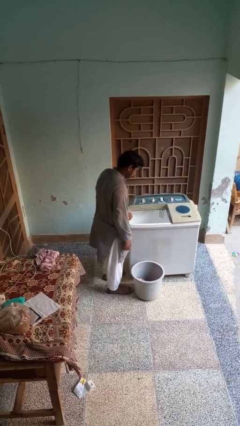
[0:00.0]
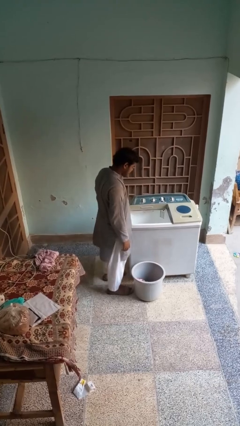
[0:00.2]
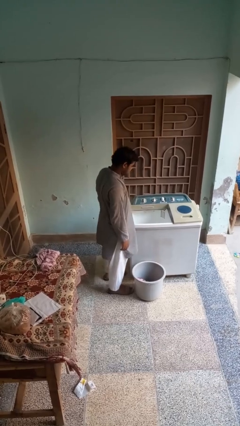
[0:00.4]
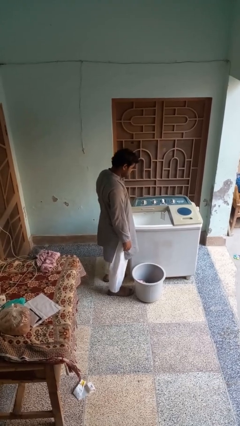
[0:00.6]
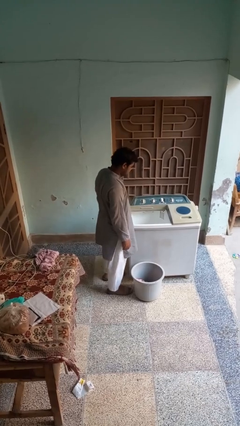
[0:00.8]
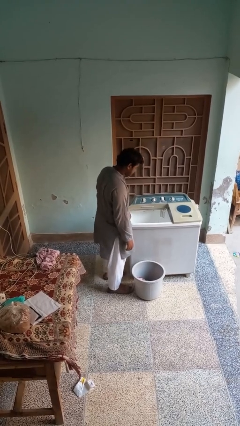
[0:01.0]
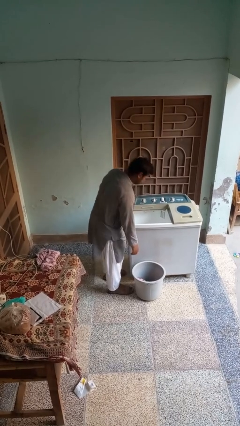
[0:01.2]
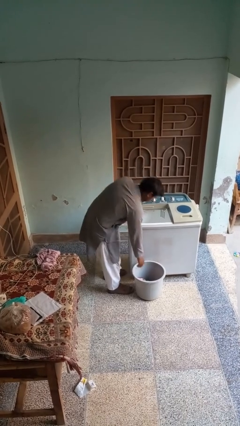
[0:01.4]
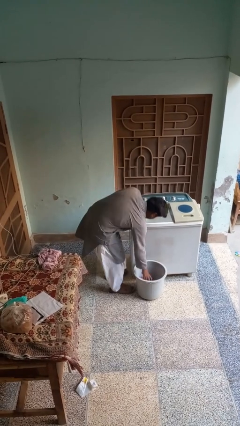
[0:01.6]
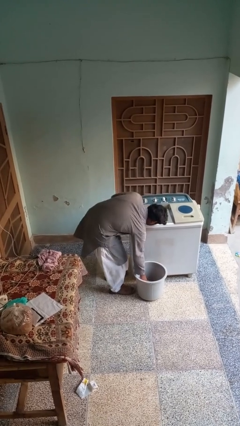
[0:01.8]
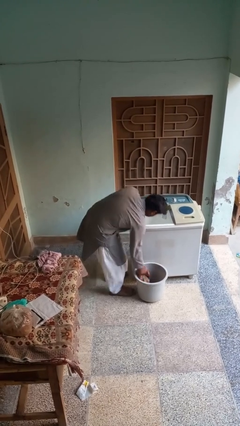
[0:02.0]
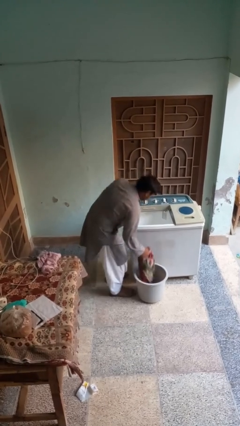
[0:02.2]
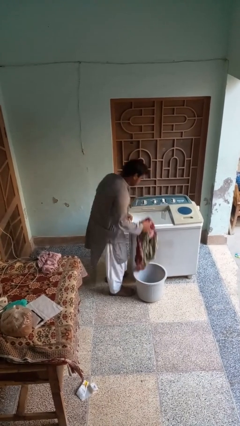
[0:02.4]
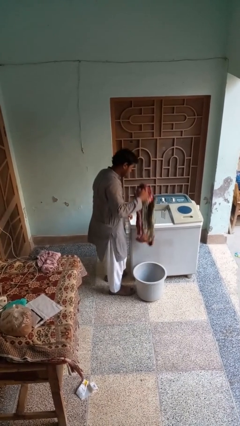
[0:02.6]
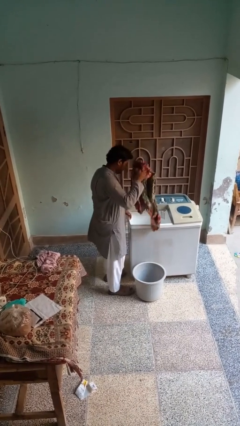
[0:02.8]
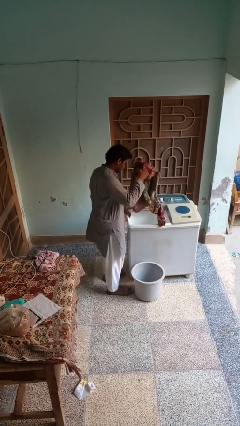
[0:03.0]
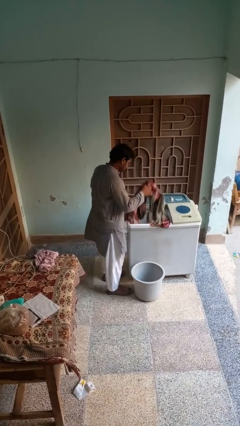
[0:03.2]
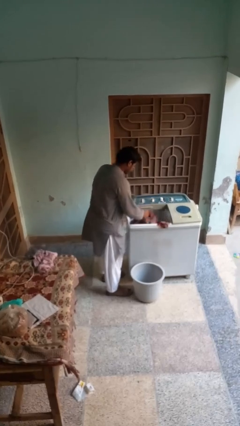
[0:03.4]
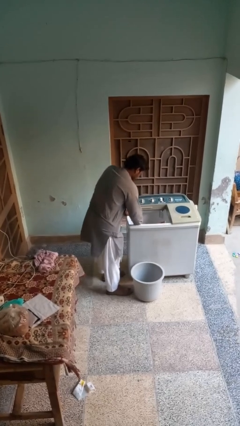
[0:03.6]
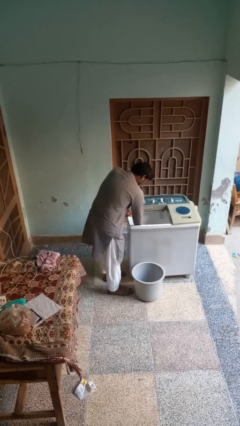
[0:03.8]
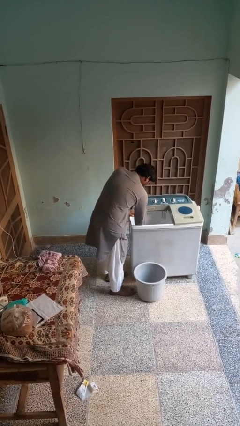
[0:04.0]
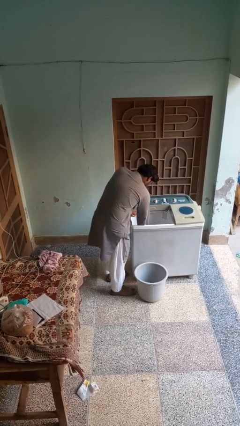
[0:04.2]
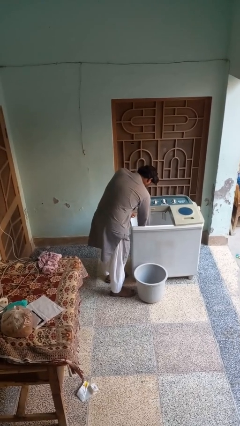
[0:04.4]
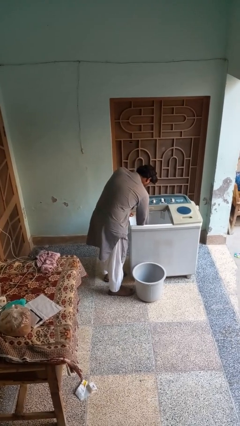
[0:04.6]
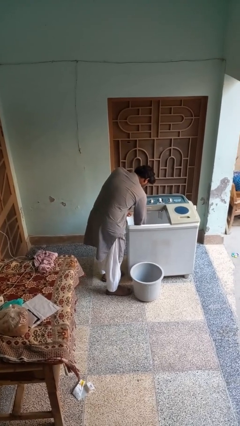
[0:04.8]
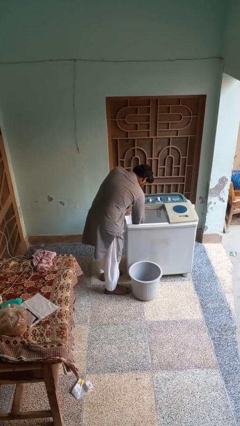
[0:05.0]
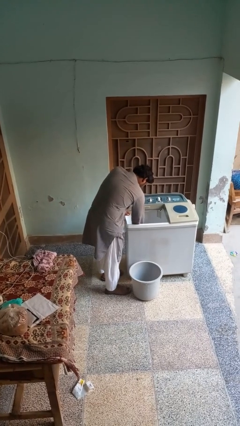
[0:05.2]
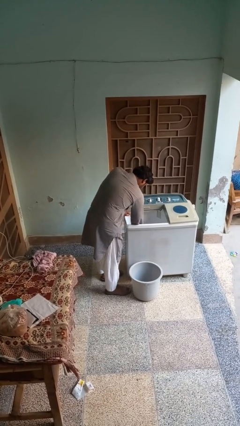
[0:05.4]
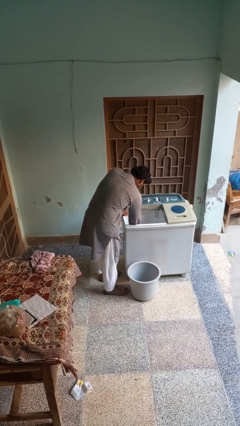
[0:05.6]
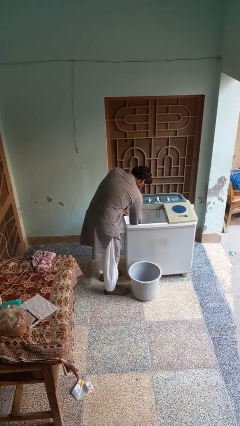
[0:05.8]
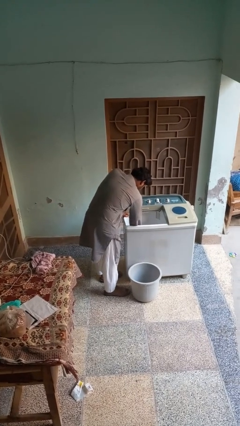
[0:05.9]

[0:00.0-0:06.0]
person loads clotheswasher

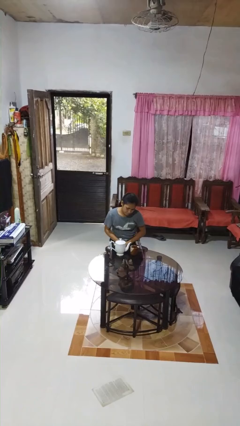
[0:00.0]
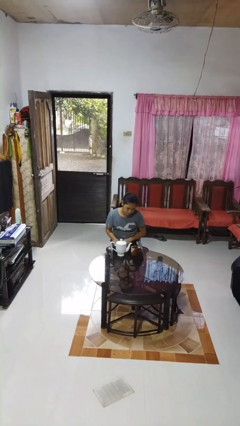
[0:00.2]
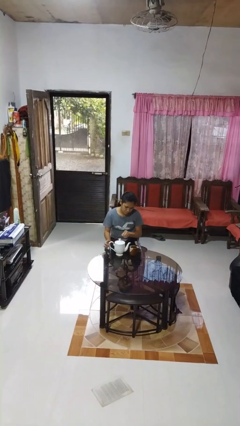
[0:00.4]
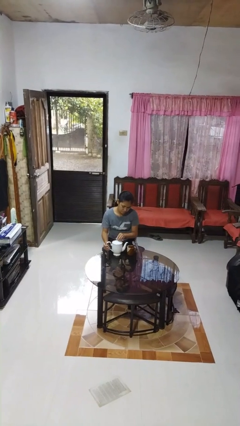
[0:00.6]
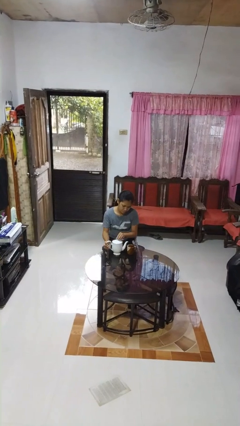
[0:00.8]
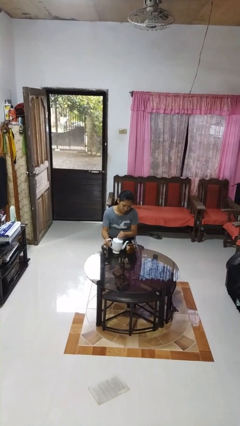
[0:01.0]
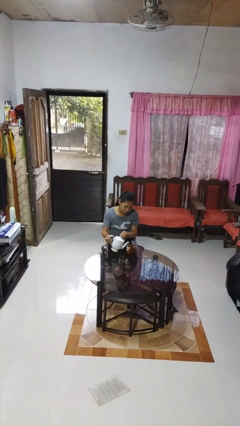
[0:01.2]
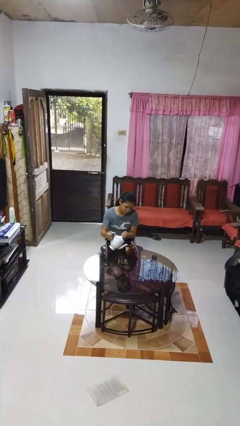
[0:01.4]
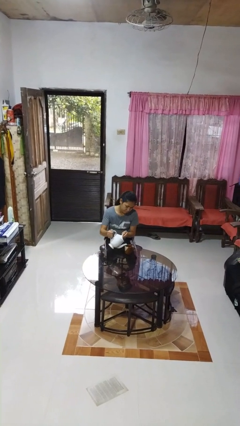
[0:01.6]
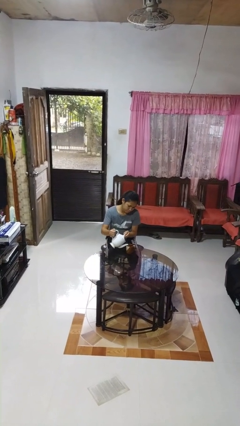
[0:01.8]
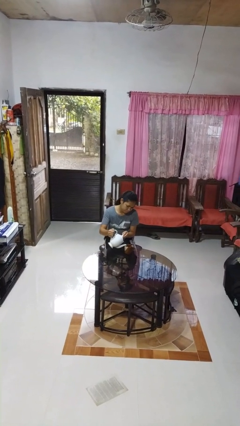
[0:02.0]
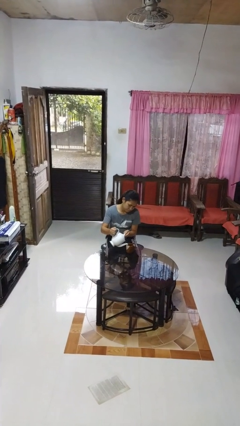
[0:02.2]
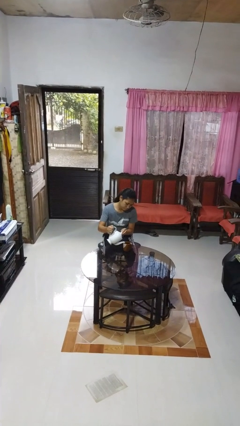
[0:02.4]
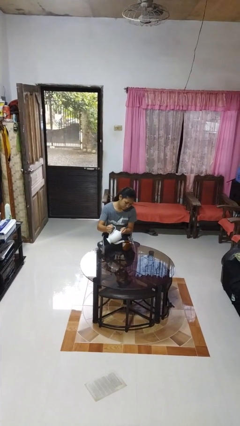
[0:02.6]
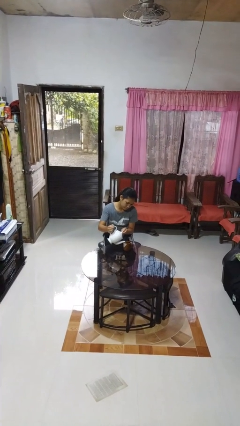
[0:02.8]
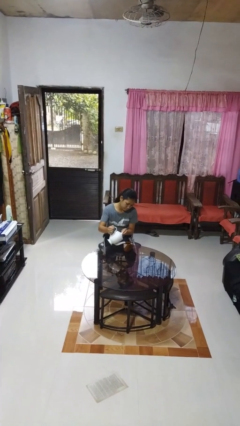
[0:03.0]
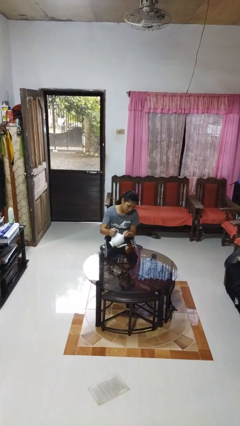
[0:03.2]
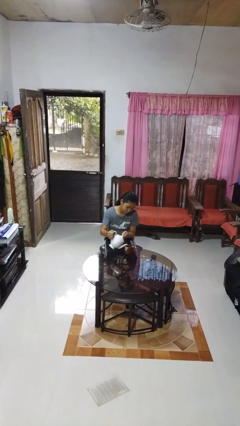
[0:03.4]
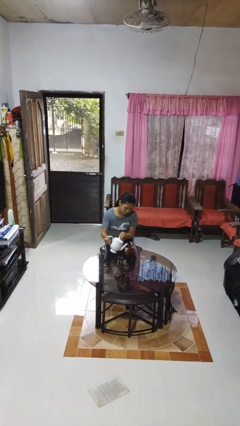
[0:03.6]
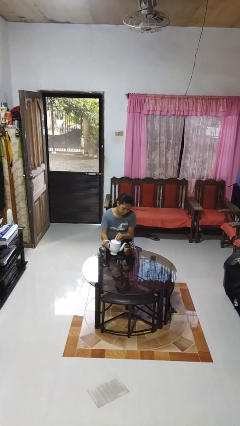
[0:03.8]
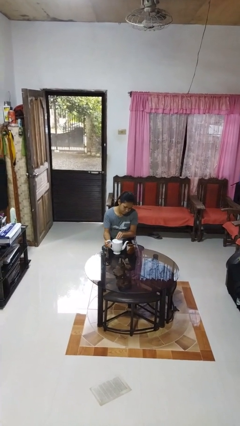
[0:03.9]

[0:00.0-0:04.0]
person pours coffee into mug

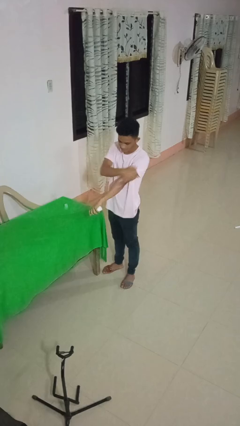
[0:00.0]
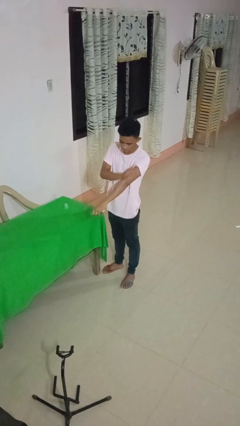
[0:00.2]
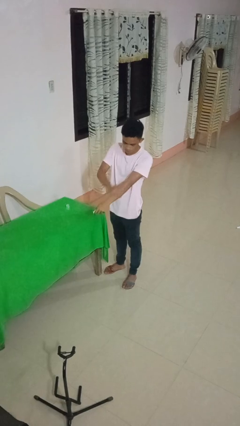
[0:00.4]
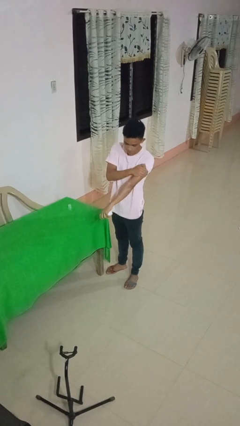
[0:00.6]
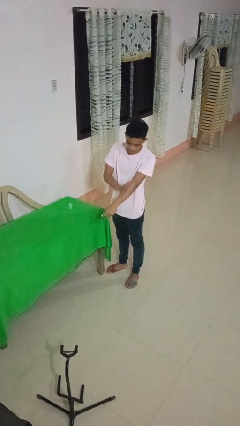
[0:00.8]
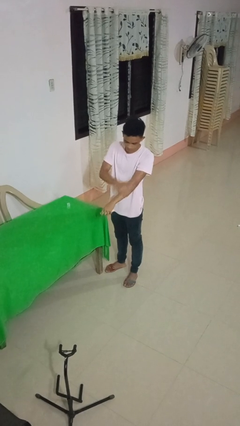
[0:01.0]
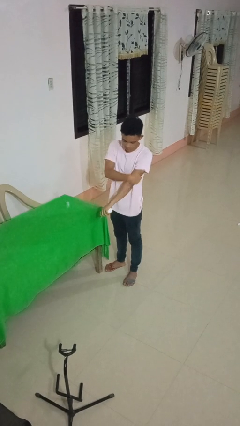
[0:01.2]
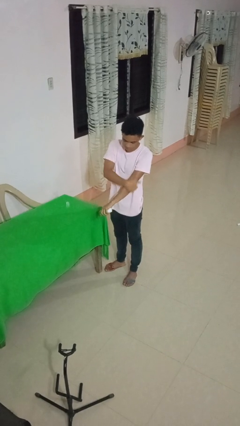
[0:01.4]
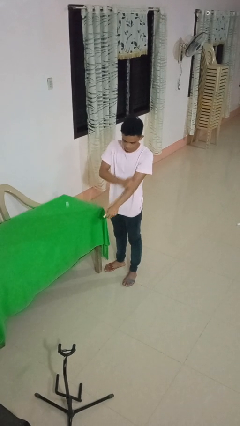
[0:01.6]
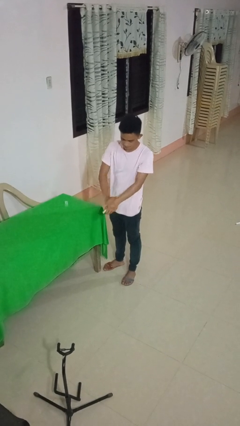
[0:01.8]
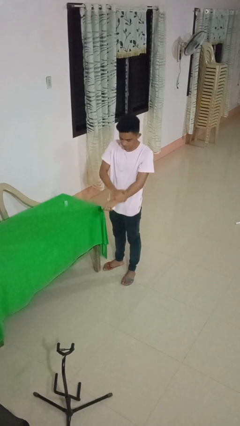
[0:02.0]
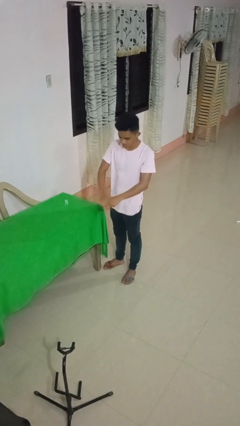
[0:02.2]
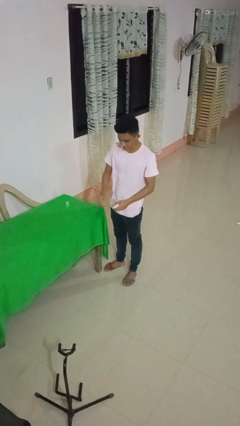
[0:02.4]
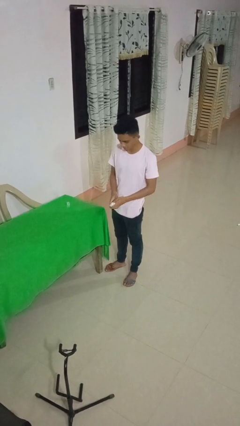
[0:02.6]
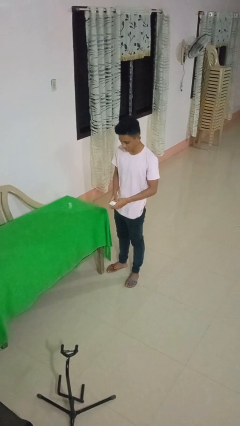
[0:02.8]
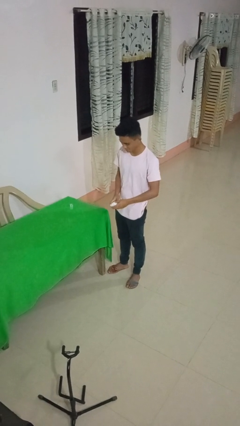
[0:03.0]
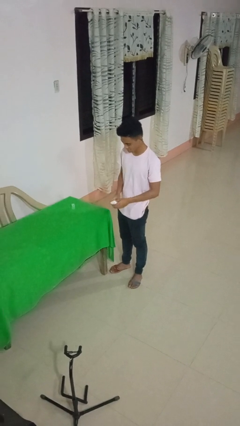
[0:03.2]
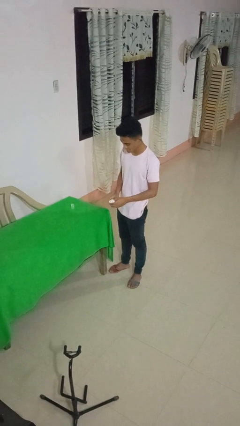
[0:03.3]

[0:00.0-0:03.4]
person applies sunscreen

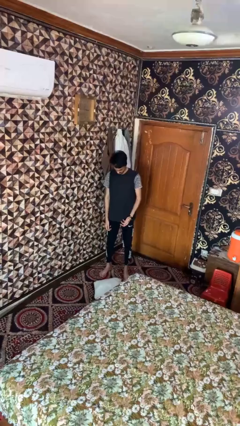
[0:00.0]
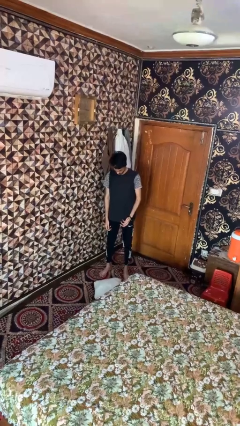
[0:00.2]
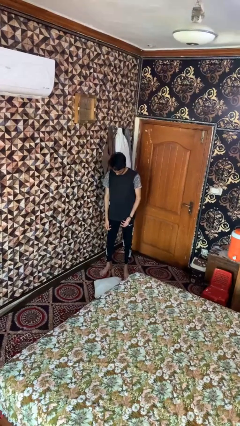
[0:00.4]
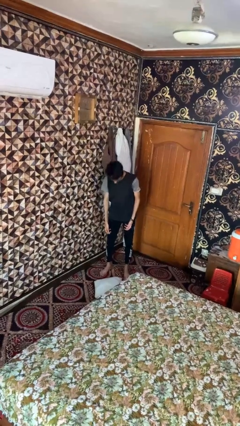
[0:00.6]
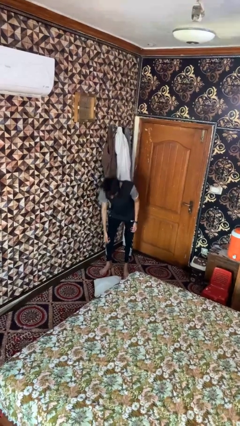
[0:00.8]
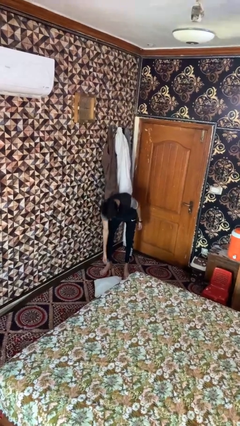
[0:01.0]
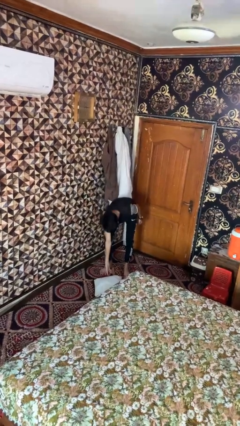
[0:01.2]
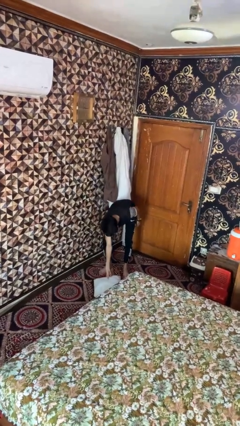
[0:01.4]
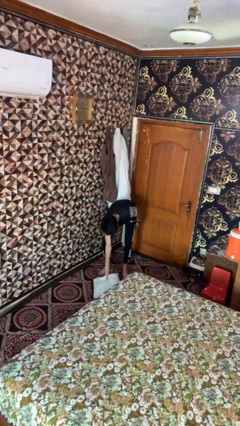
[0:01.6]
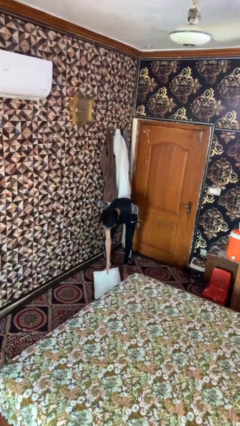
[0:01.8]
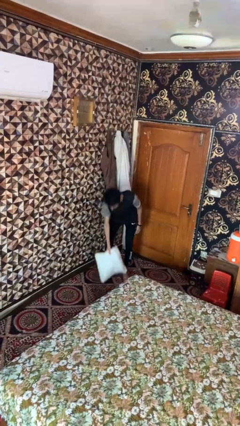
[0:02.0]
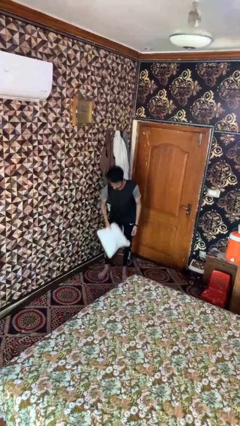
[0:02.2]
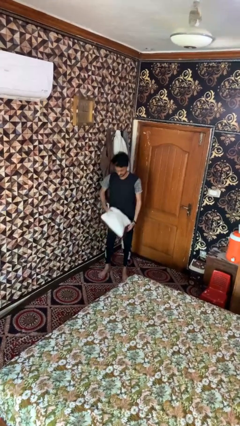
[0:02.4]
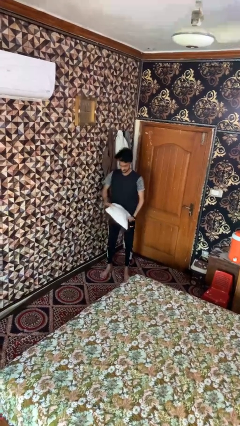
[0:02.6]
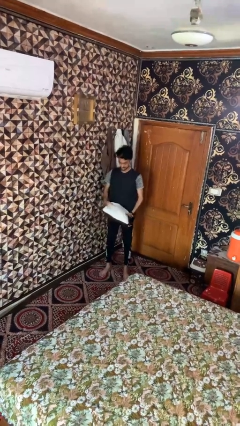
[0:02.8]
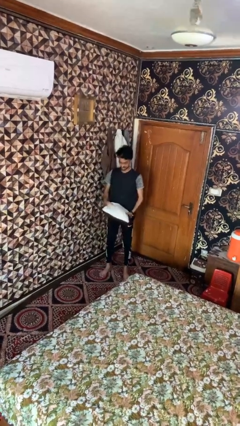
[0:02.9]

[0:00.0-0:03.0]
person picks up object from floor

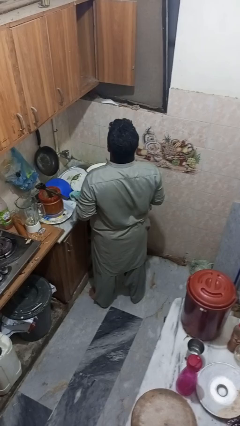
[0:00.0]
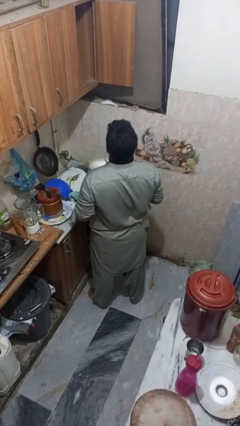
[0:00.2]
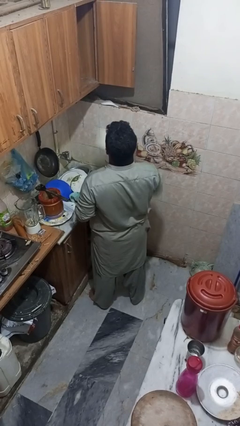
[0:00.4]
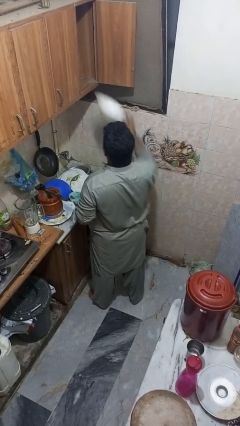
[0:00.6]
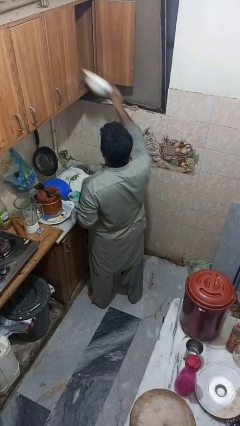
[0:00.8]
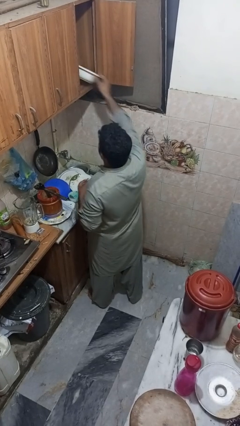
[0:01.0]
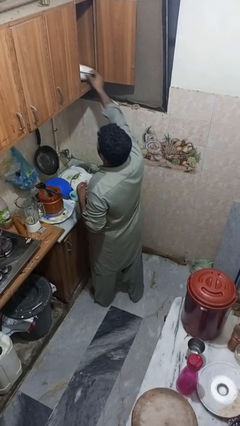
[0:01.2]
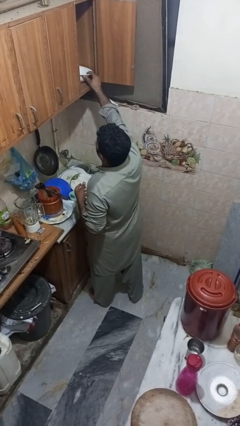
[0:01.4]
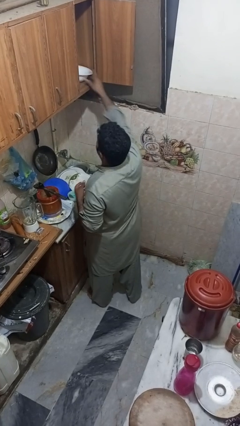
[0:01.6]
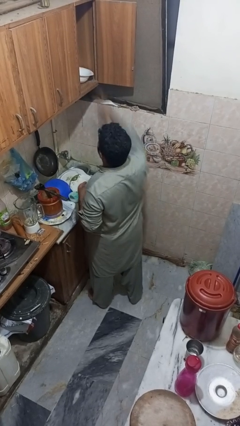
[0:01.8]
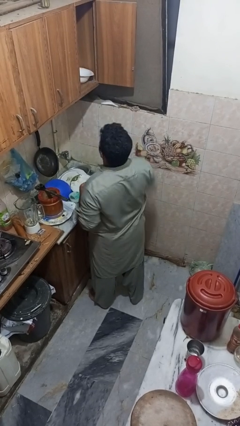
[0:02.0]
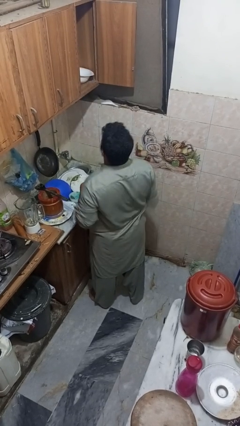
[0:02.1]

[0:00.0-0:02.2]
person puts object in cabinet
